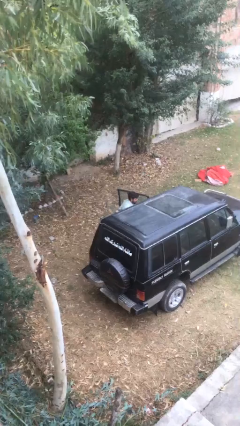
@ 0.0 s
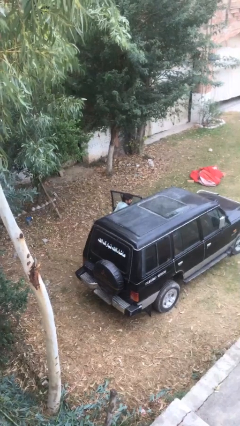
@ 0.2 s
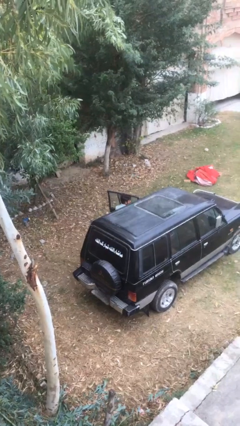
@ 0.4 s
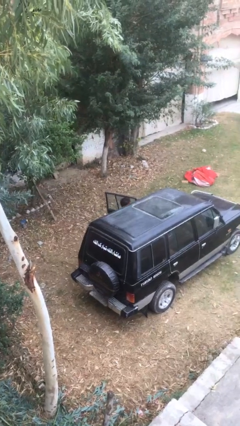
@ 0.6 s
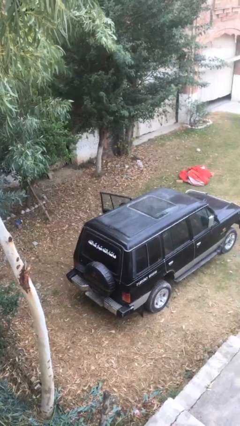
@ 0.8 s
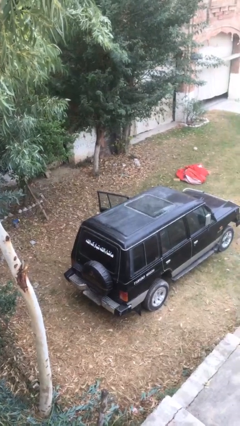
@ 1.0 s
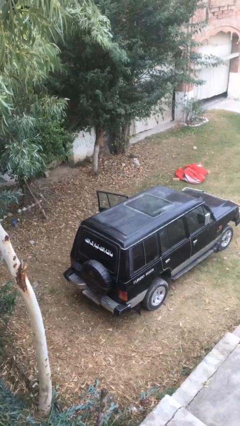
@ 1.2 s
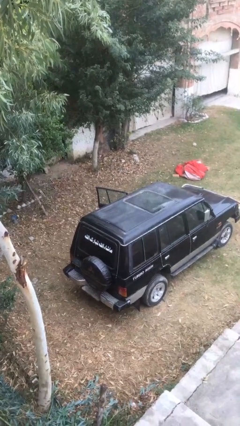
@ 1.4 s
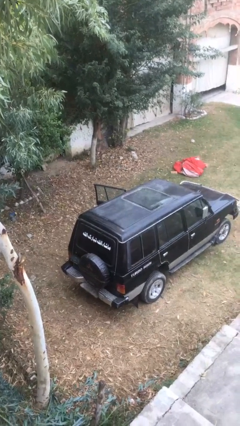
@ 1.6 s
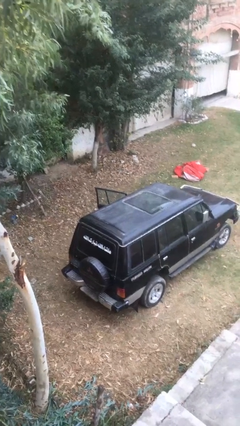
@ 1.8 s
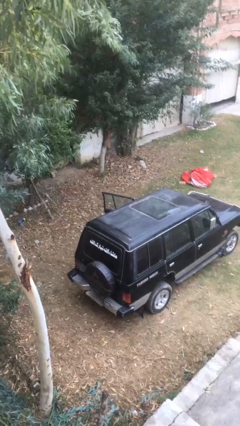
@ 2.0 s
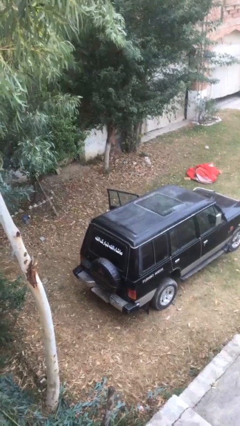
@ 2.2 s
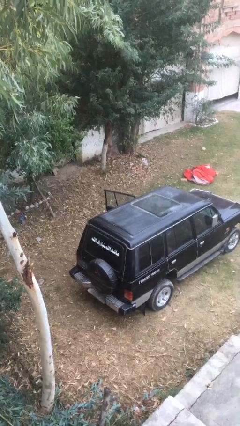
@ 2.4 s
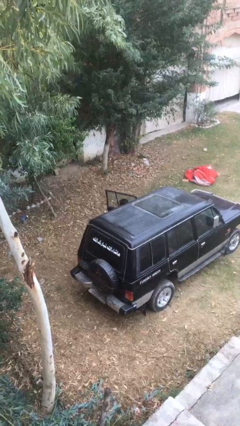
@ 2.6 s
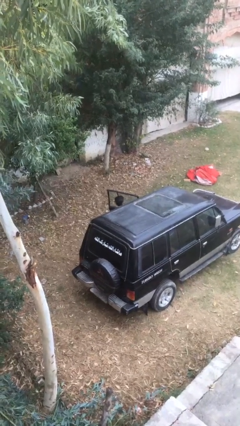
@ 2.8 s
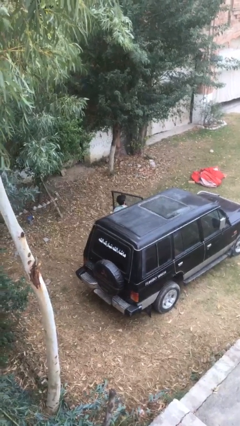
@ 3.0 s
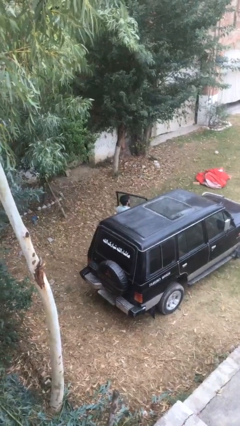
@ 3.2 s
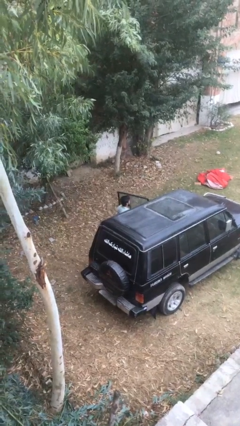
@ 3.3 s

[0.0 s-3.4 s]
person enters car

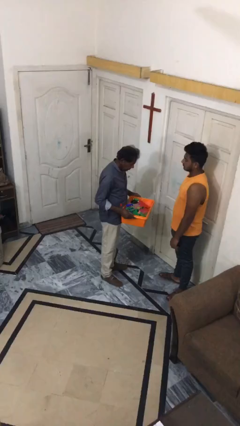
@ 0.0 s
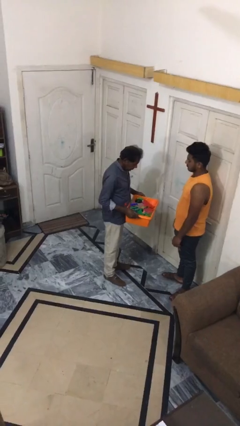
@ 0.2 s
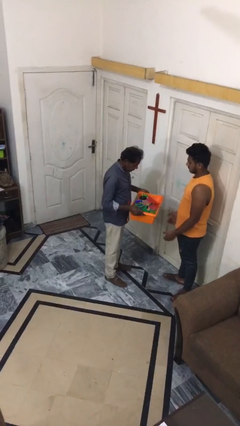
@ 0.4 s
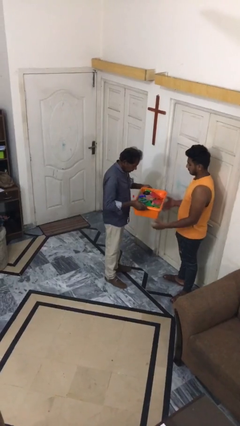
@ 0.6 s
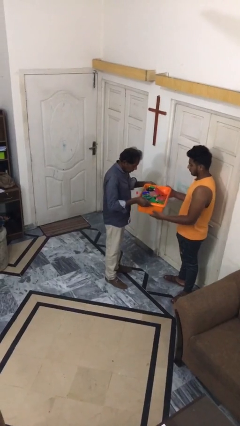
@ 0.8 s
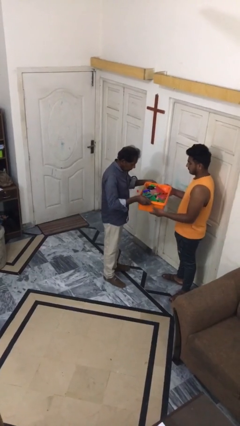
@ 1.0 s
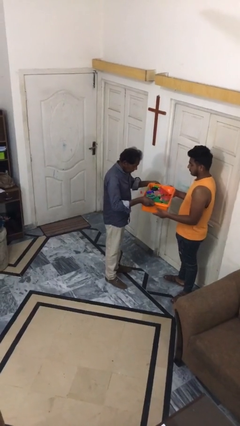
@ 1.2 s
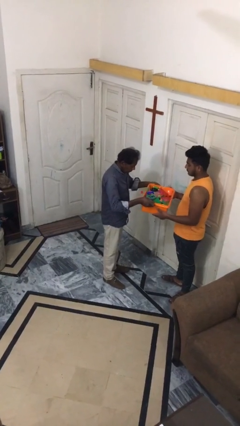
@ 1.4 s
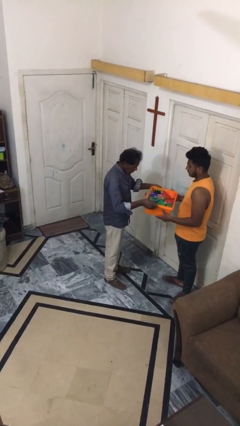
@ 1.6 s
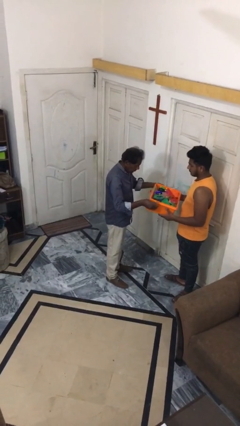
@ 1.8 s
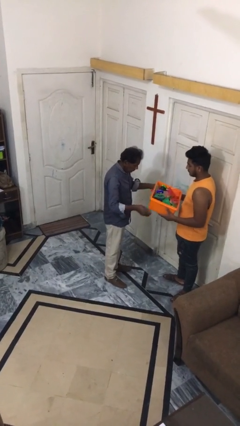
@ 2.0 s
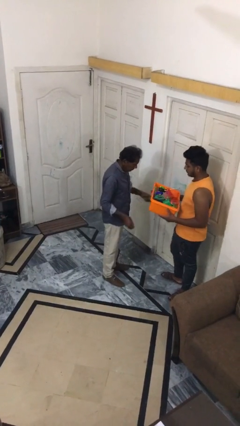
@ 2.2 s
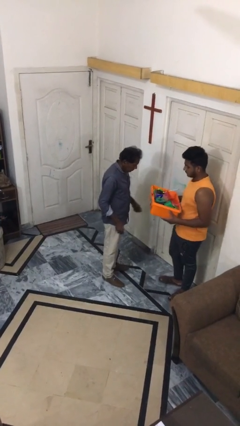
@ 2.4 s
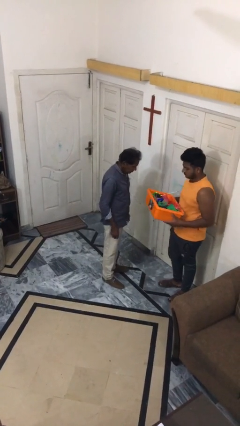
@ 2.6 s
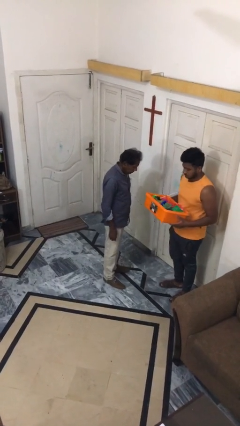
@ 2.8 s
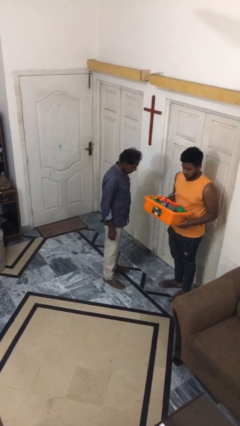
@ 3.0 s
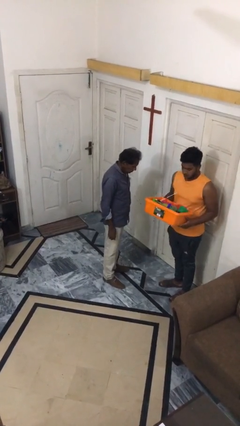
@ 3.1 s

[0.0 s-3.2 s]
person transfers object to person

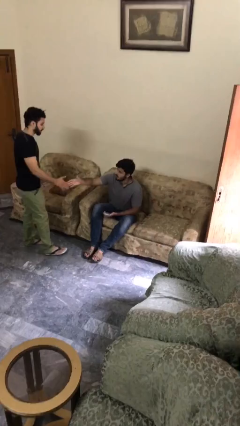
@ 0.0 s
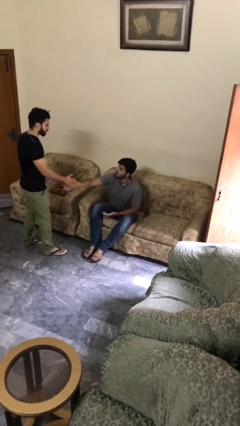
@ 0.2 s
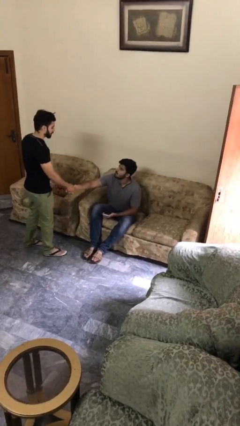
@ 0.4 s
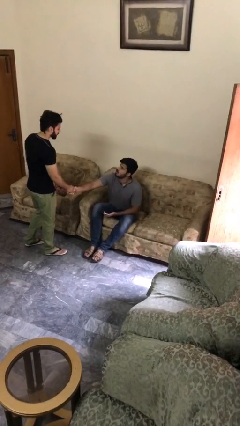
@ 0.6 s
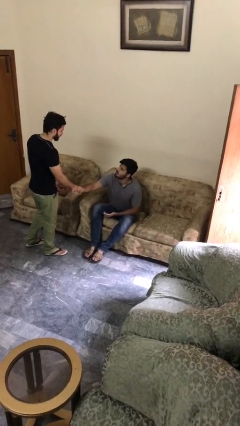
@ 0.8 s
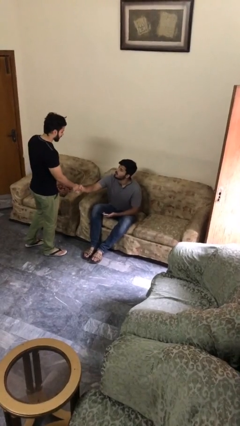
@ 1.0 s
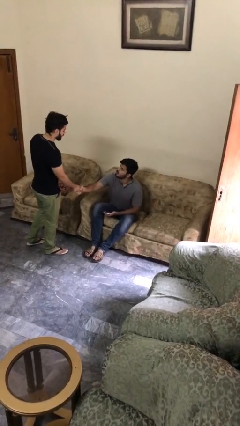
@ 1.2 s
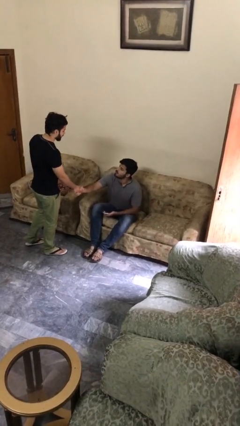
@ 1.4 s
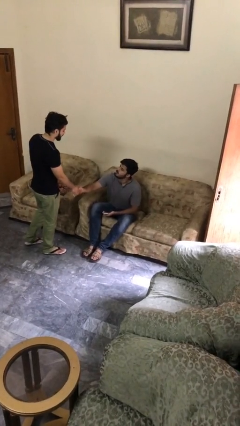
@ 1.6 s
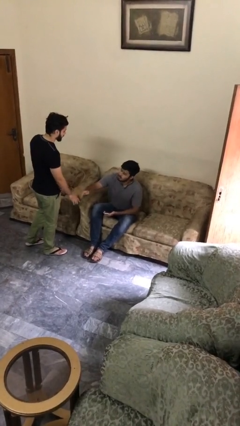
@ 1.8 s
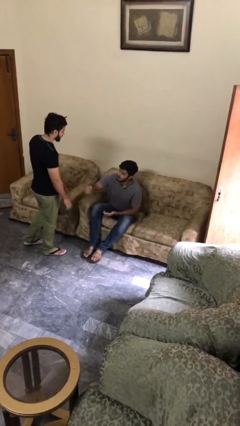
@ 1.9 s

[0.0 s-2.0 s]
person shakes hand

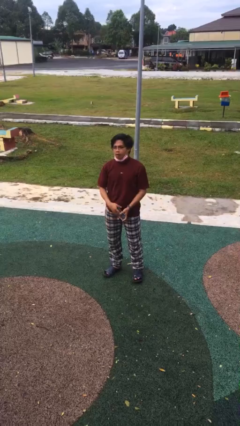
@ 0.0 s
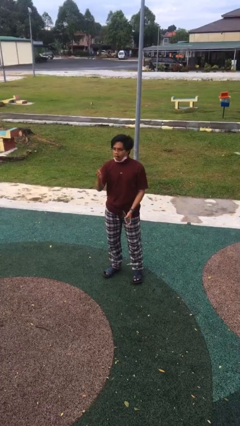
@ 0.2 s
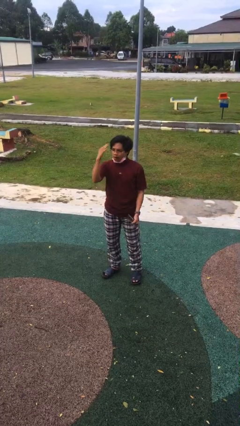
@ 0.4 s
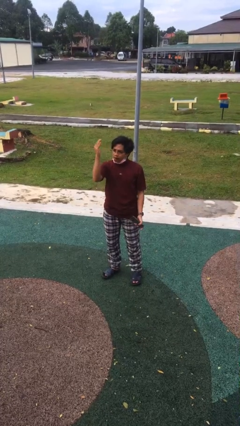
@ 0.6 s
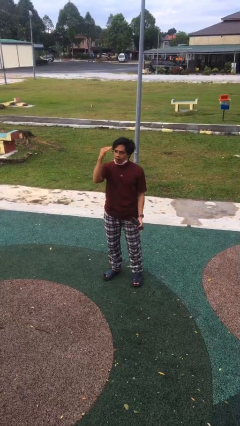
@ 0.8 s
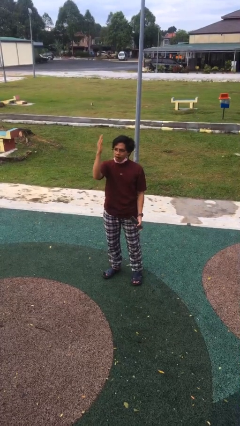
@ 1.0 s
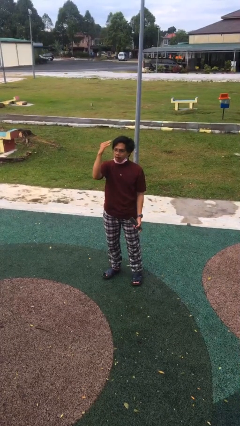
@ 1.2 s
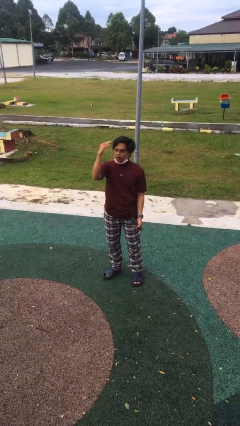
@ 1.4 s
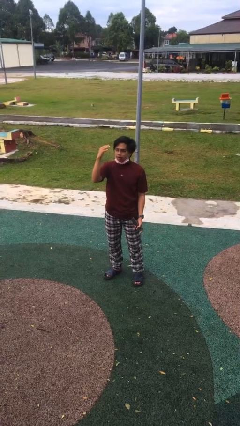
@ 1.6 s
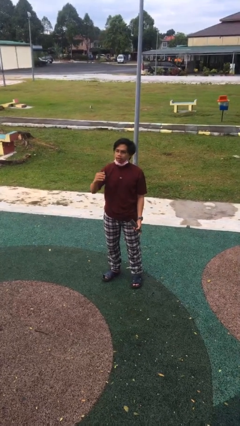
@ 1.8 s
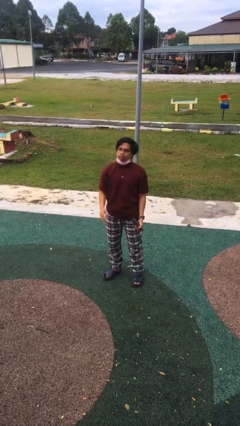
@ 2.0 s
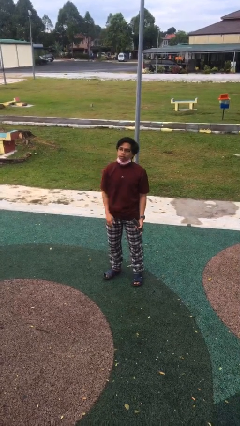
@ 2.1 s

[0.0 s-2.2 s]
person gestures come here

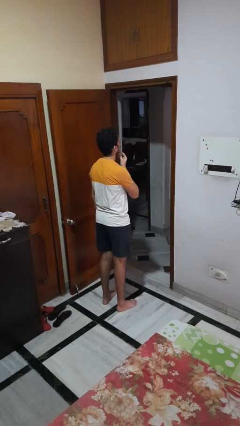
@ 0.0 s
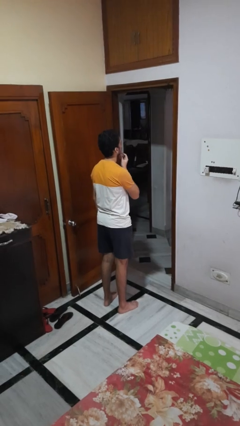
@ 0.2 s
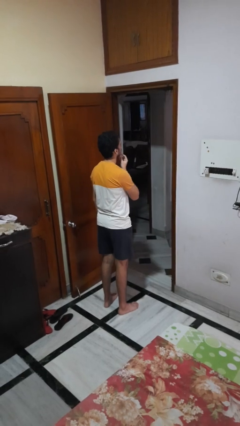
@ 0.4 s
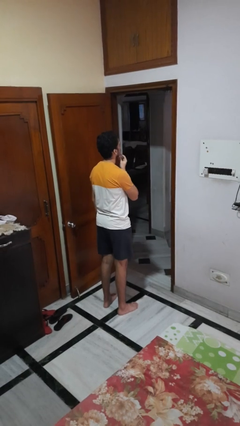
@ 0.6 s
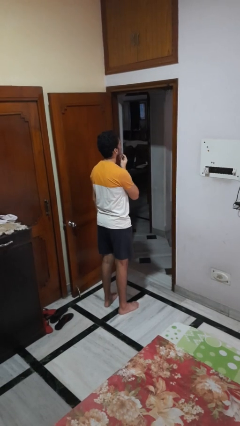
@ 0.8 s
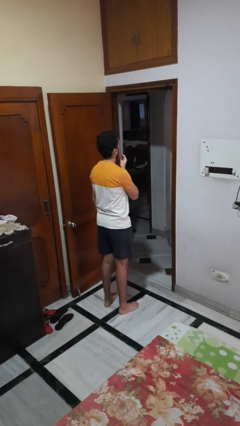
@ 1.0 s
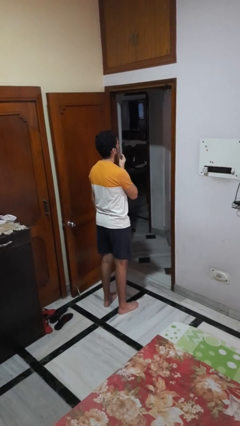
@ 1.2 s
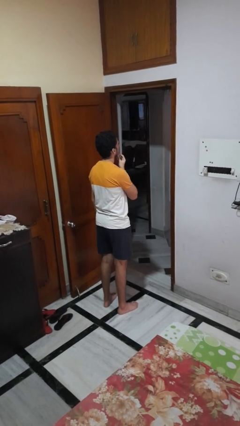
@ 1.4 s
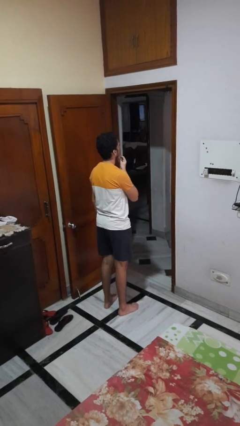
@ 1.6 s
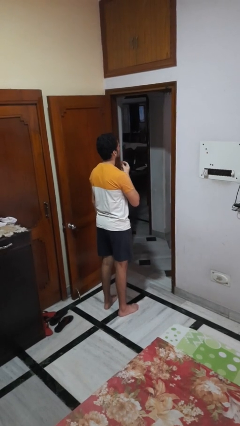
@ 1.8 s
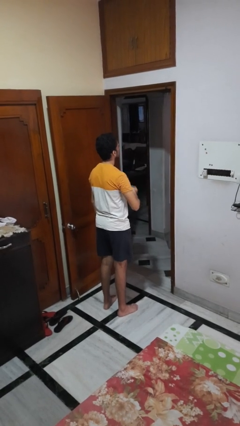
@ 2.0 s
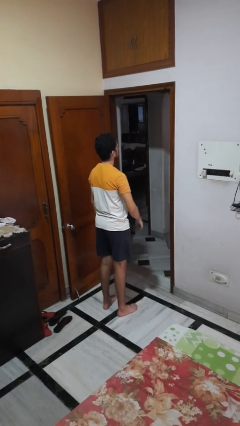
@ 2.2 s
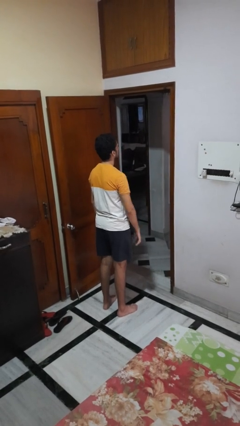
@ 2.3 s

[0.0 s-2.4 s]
person strokes chin

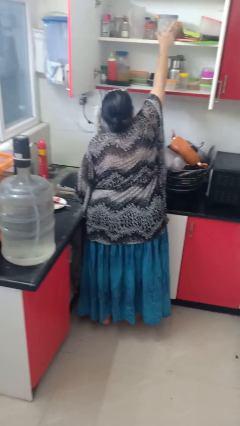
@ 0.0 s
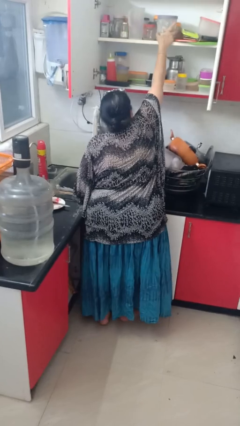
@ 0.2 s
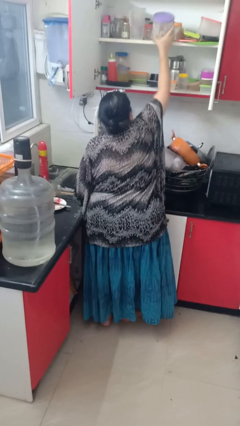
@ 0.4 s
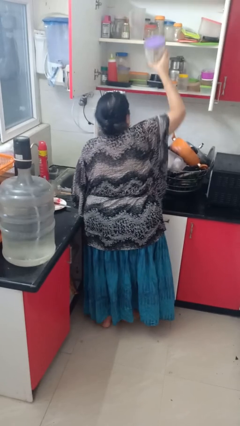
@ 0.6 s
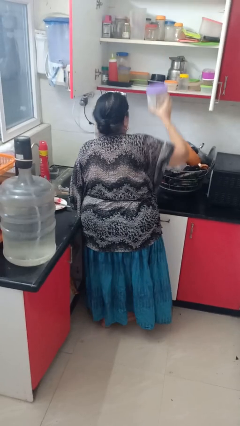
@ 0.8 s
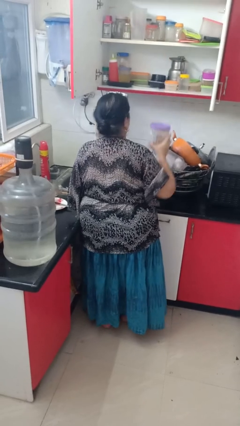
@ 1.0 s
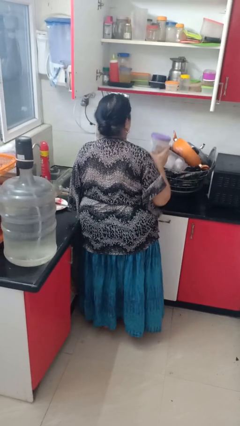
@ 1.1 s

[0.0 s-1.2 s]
person puts object in cabinet

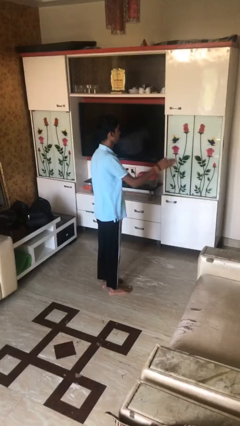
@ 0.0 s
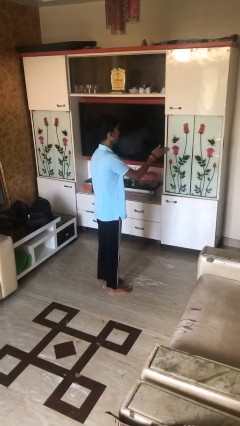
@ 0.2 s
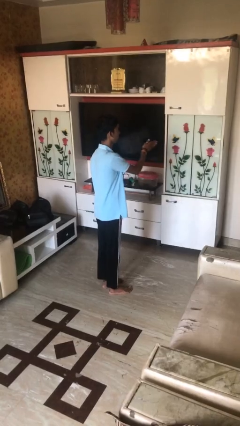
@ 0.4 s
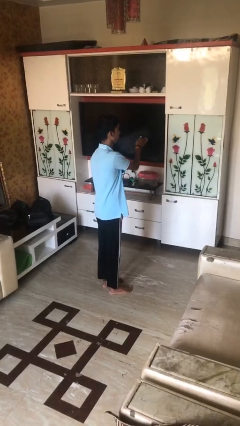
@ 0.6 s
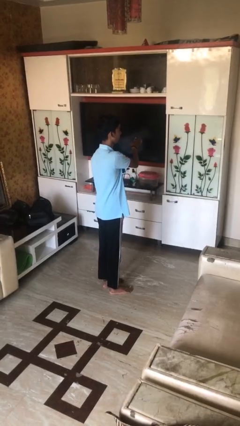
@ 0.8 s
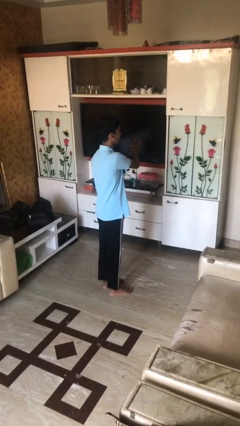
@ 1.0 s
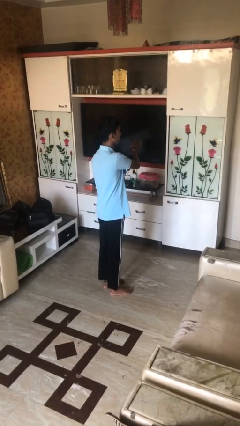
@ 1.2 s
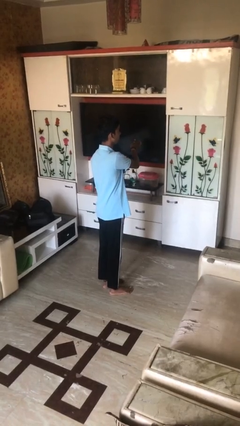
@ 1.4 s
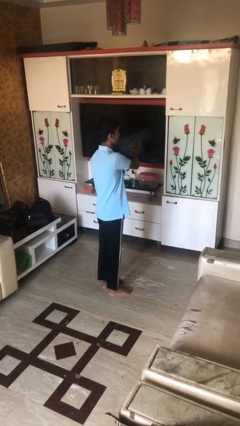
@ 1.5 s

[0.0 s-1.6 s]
person gestures swipe left

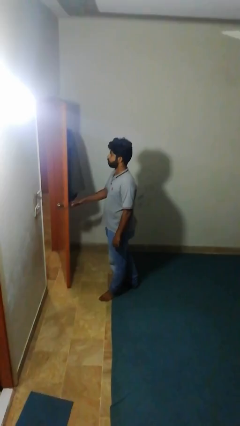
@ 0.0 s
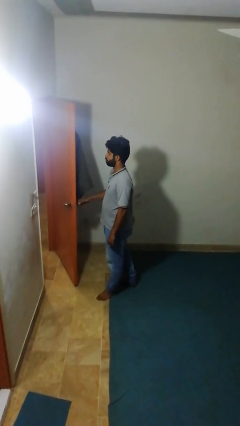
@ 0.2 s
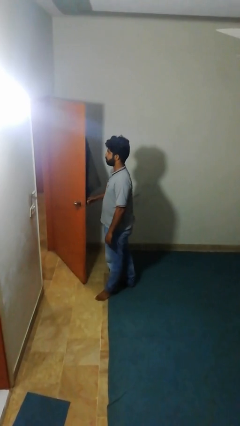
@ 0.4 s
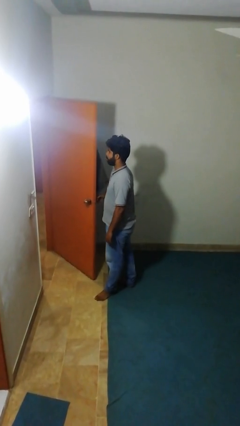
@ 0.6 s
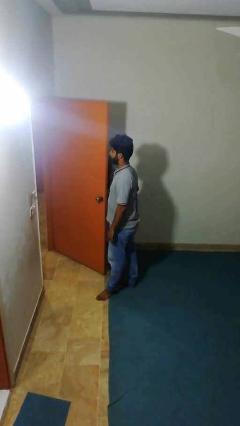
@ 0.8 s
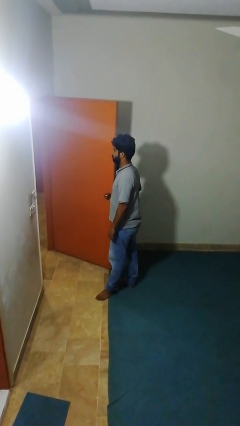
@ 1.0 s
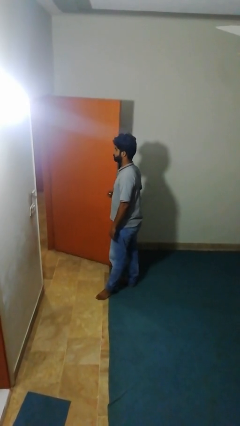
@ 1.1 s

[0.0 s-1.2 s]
person opens facility door
